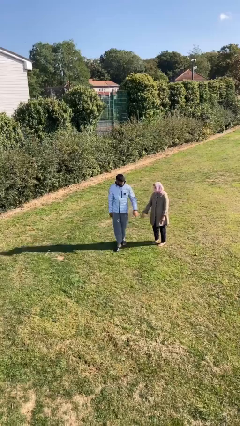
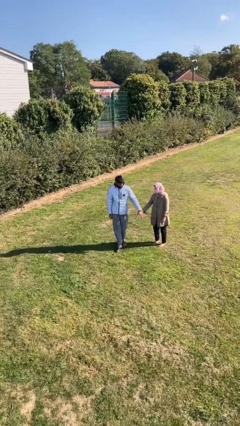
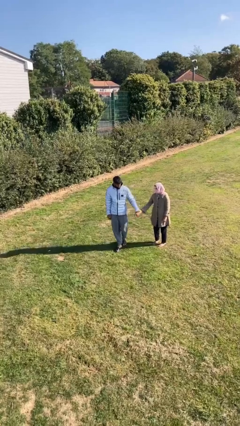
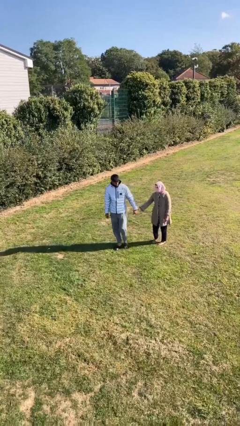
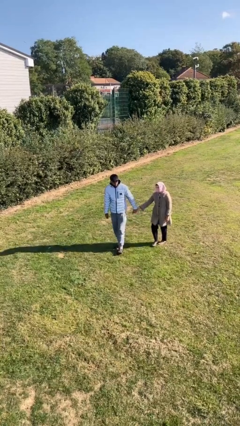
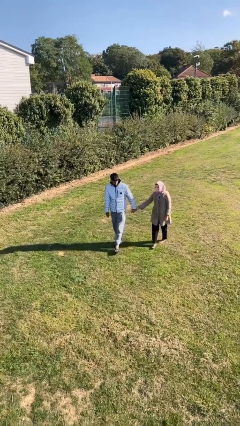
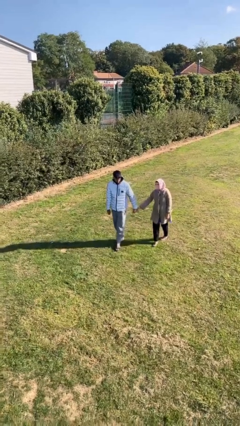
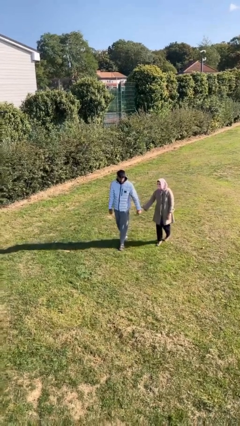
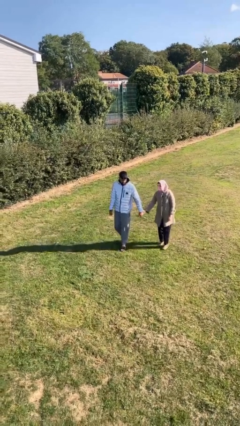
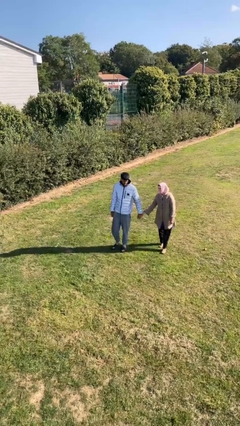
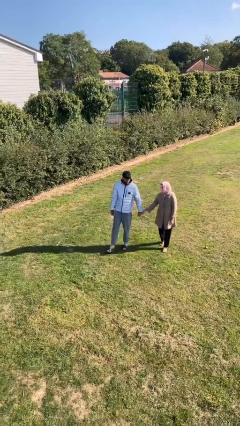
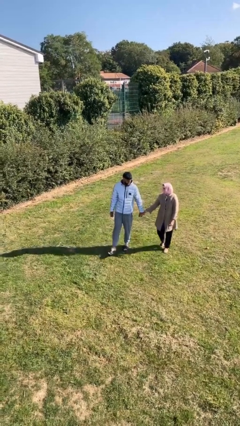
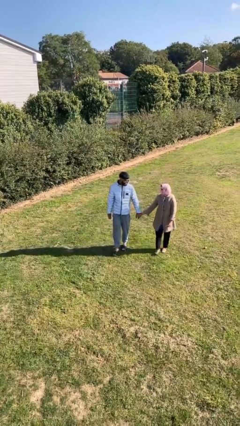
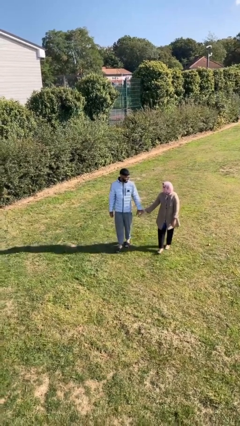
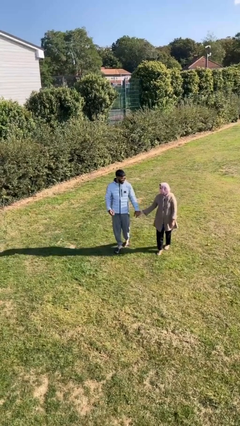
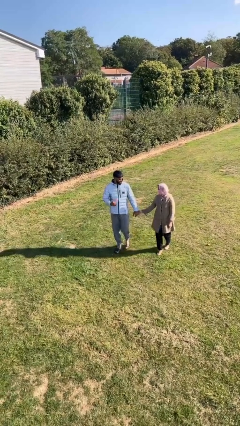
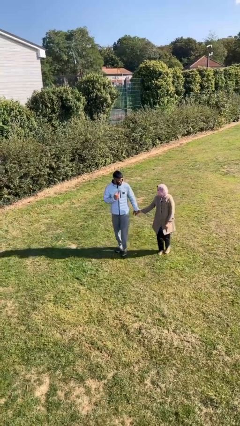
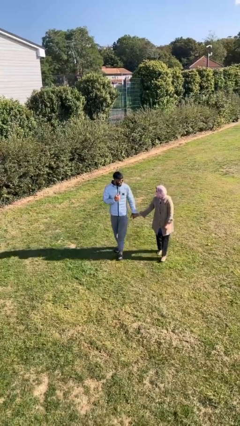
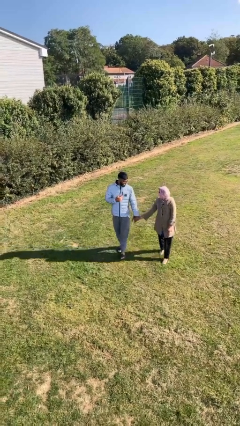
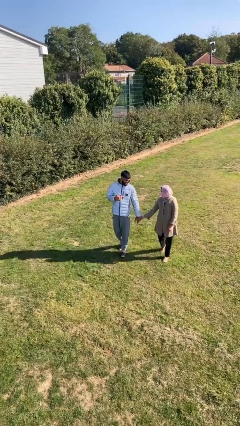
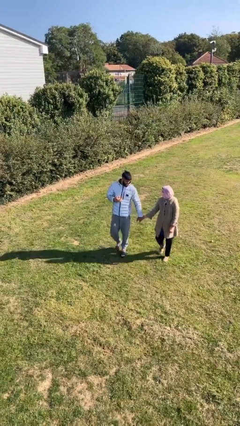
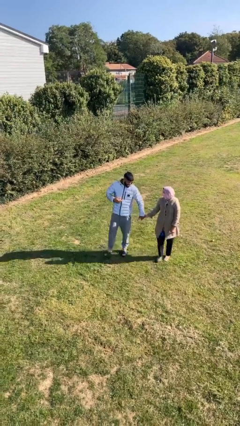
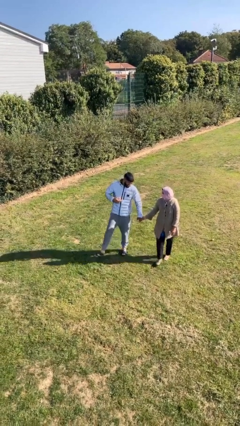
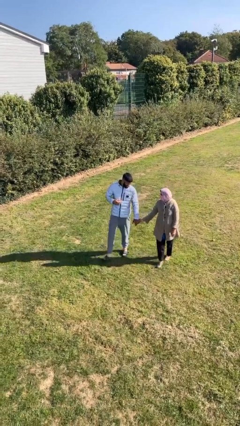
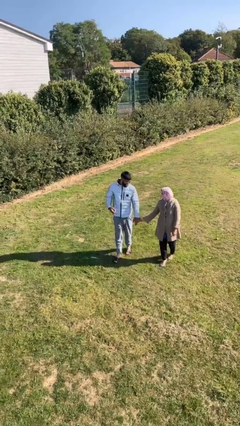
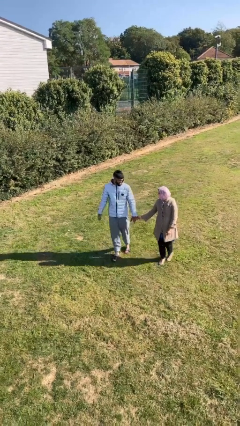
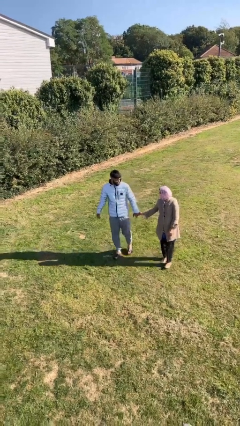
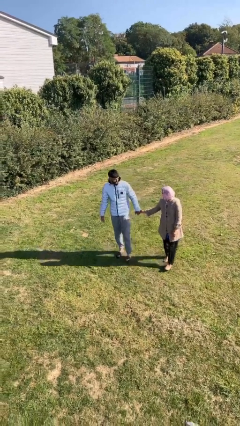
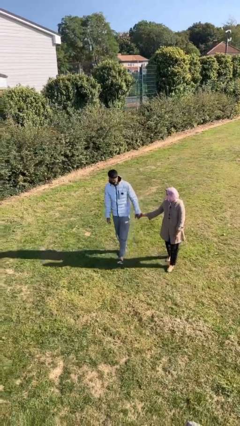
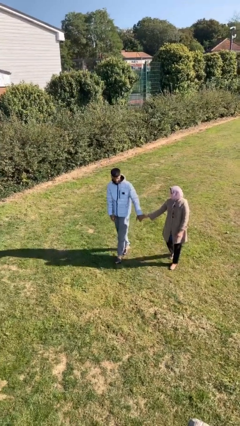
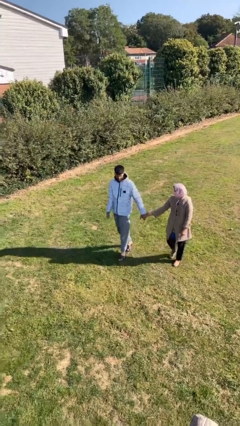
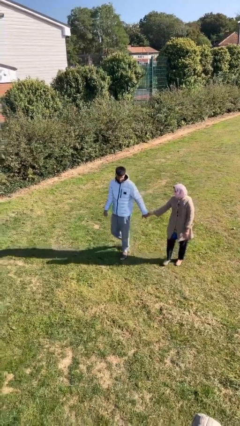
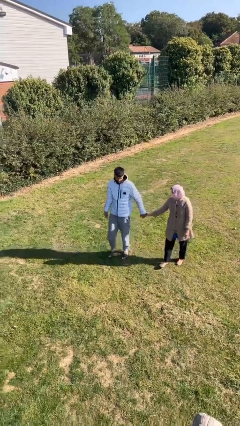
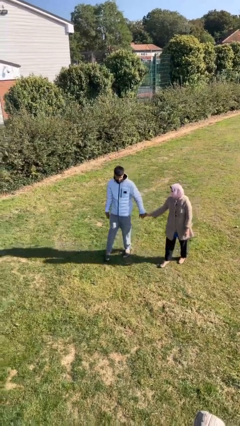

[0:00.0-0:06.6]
person holds hand

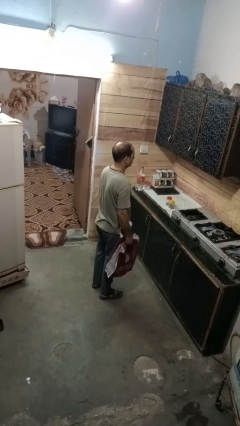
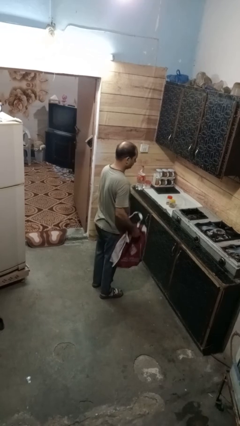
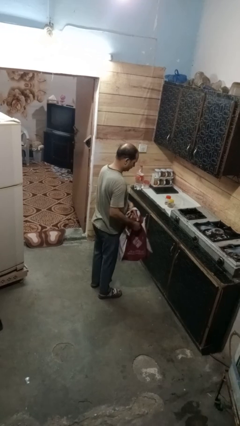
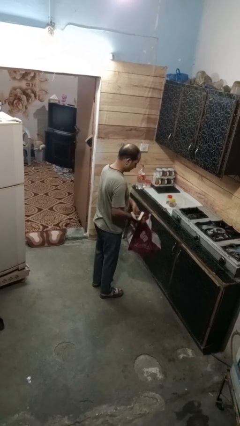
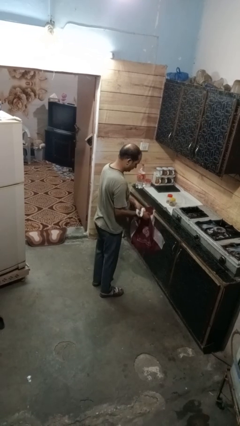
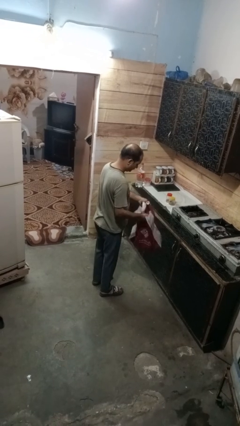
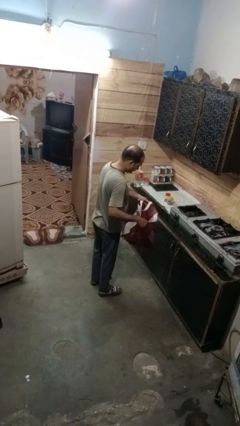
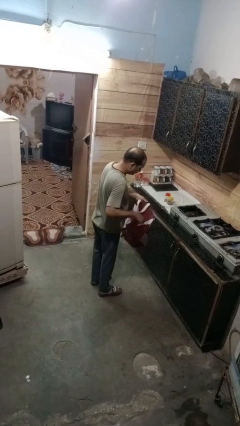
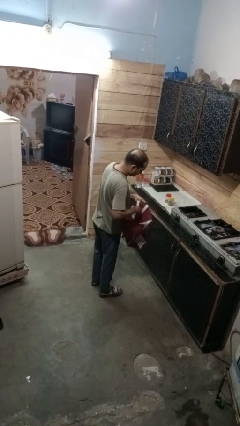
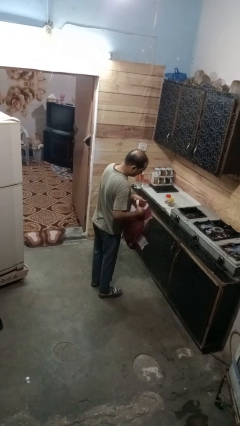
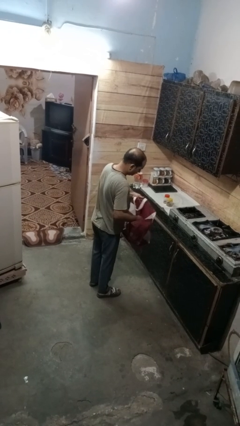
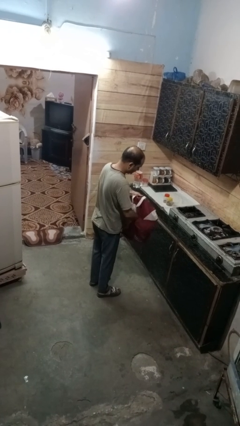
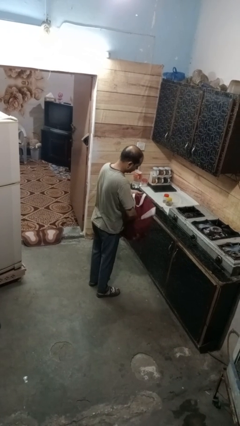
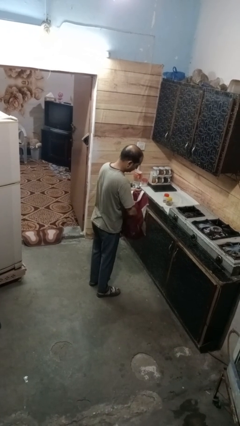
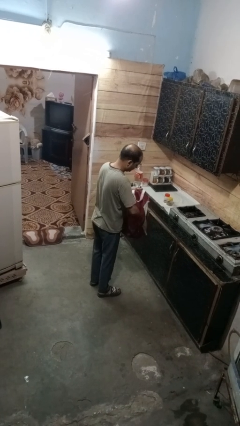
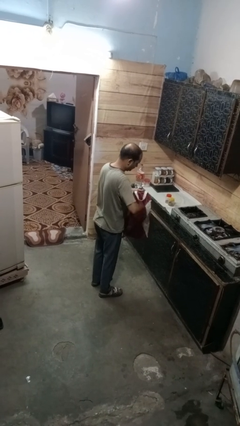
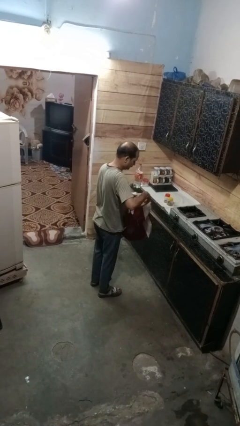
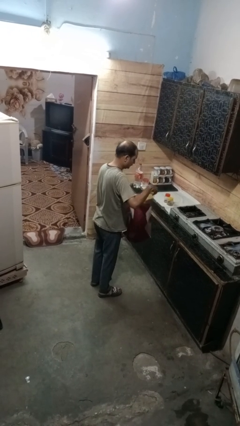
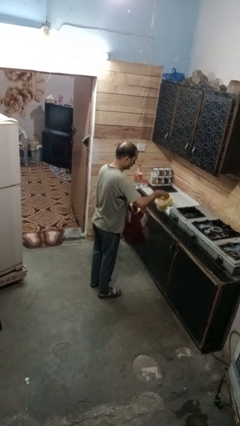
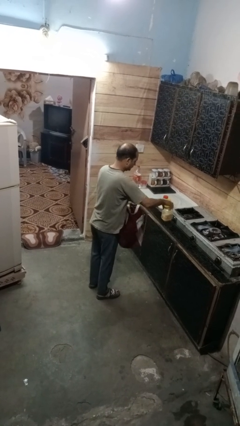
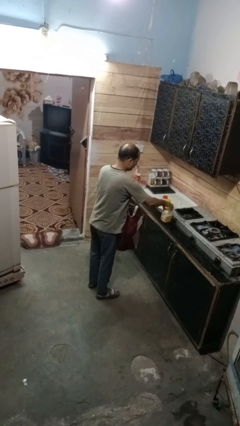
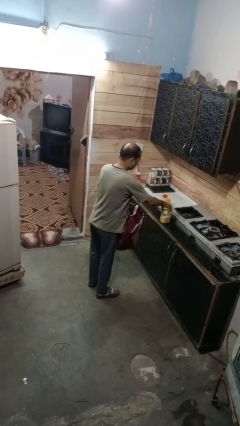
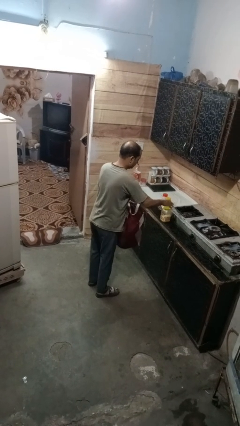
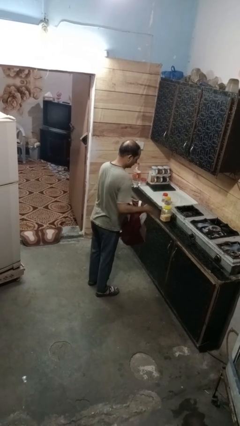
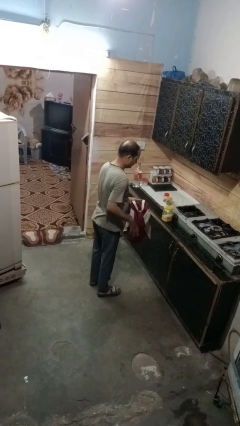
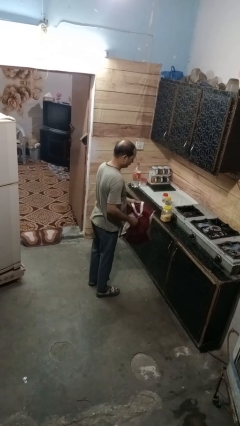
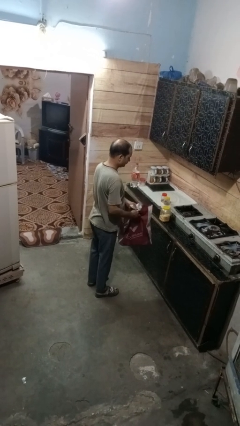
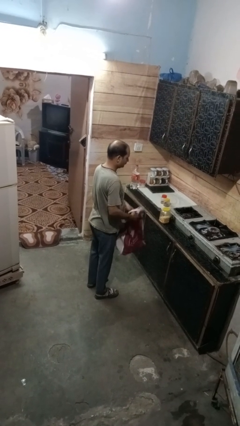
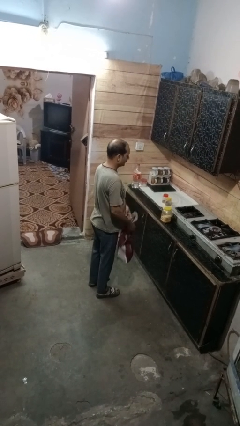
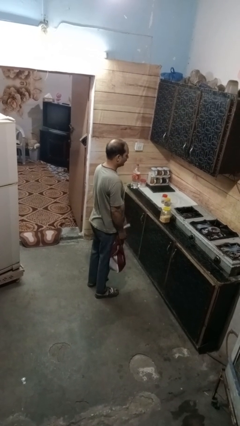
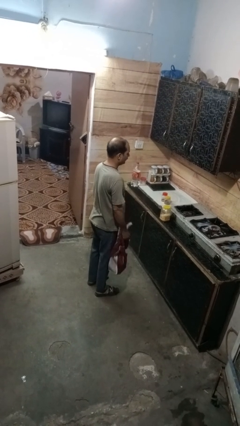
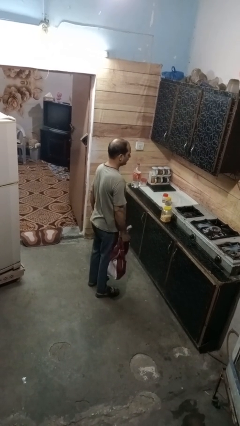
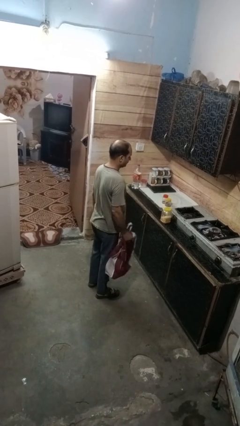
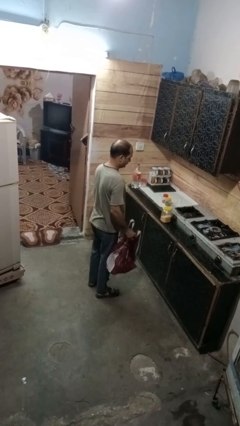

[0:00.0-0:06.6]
person takes object from bag

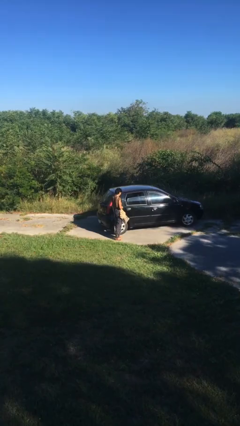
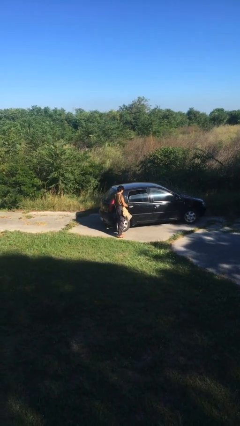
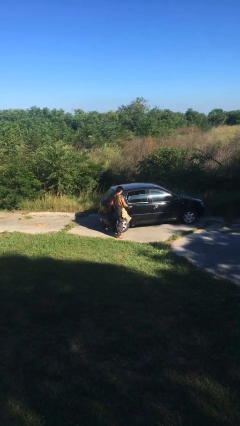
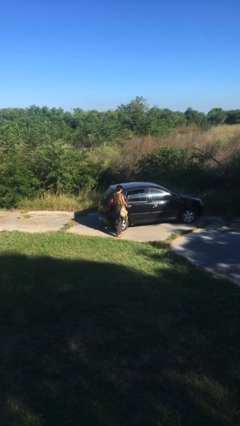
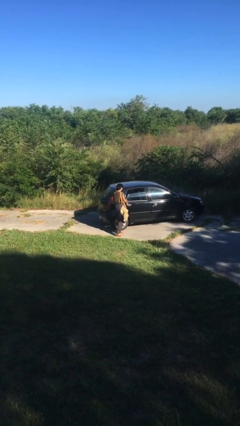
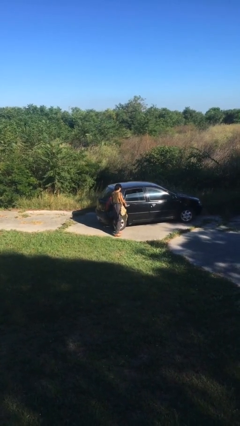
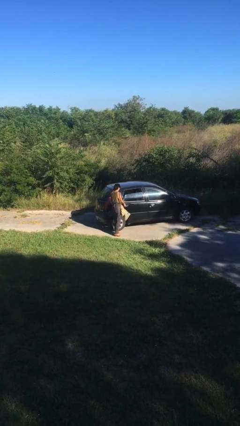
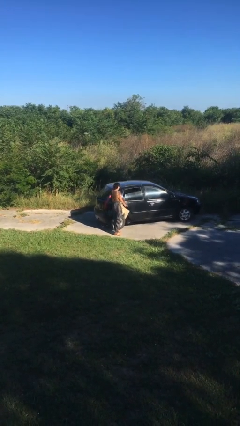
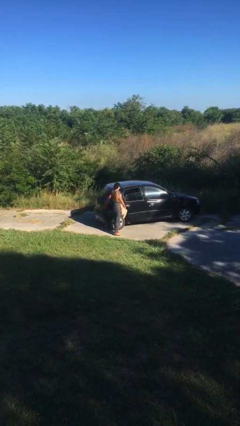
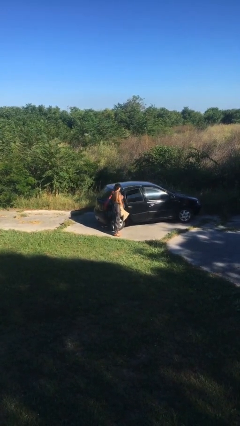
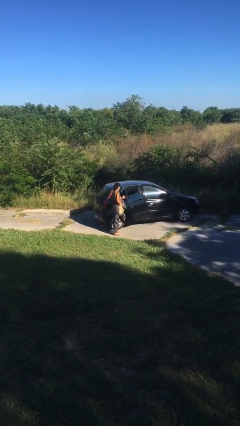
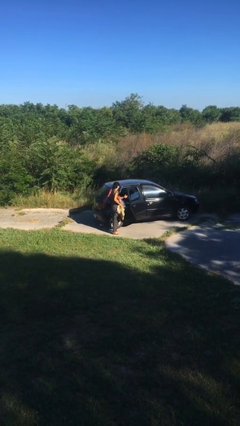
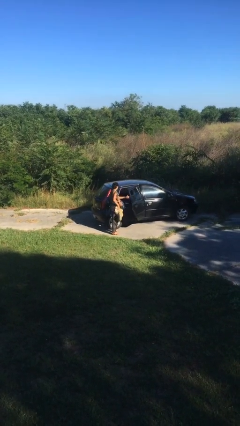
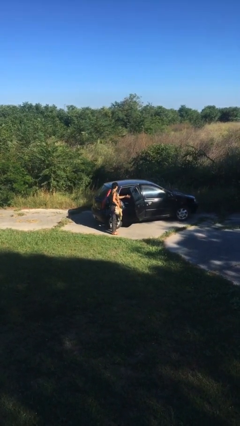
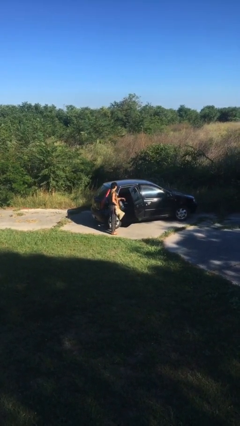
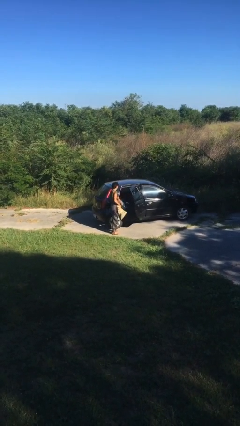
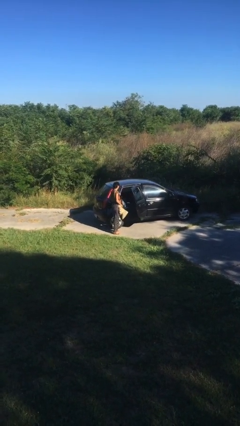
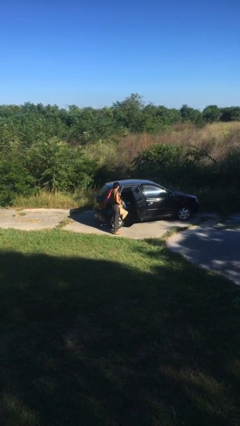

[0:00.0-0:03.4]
person opens car door

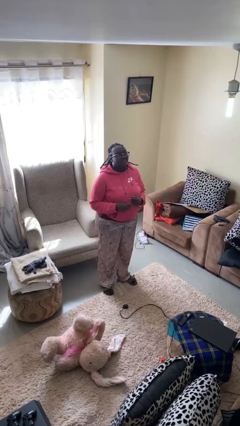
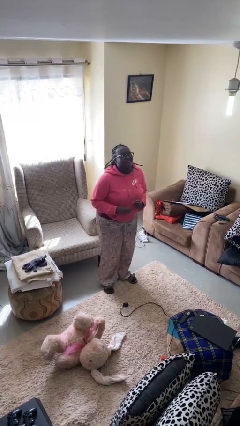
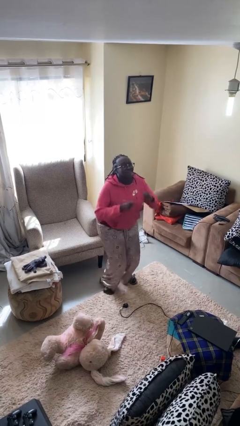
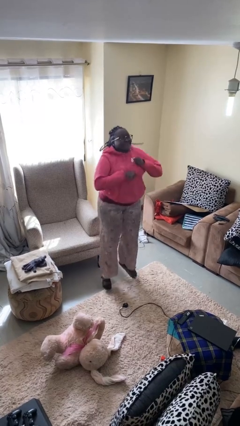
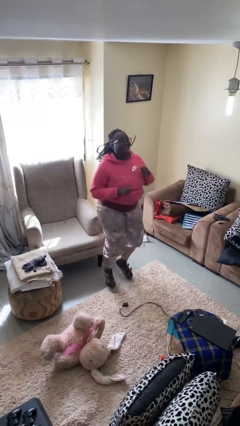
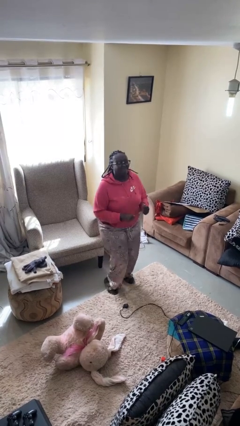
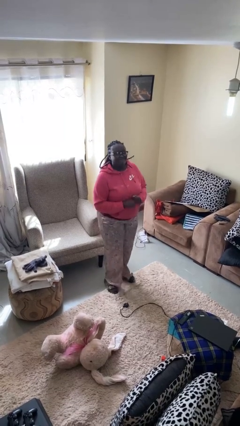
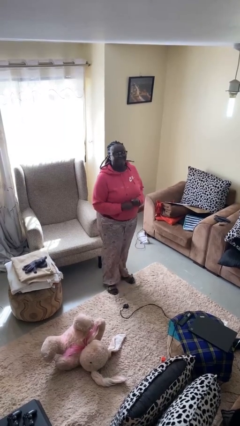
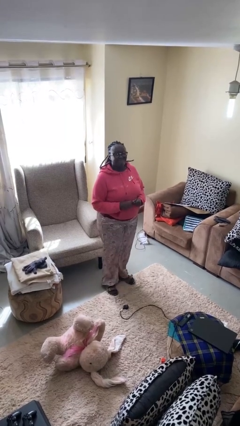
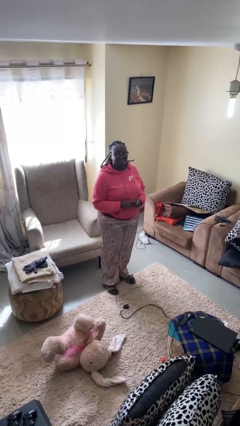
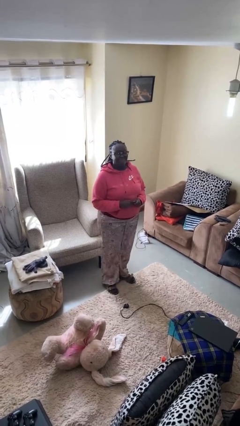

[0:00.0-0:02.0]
person jumps
